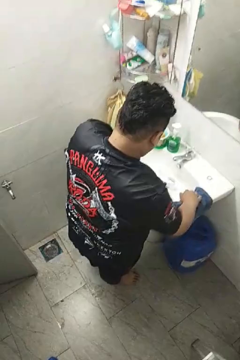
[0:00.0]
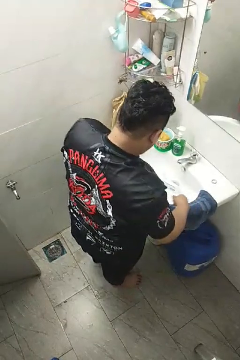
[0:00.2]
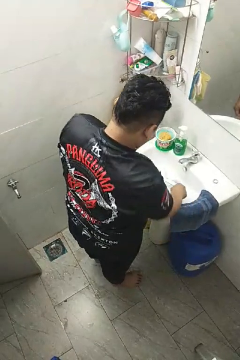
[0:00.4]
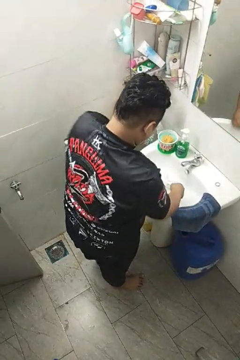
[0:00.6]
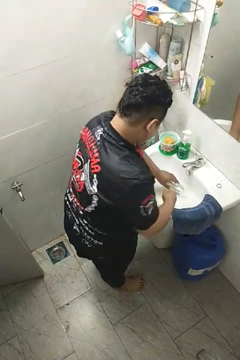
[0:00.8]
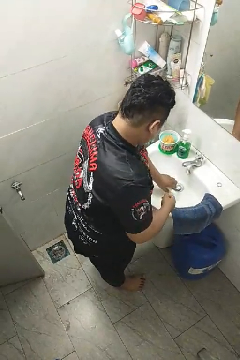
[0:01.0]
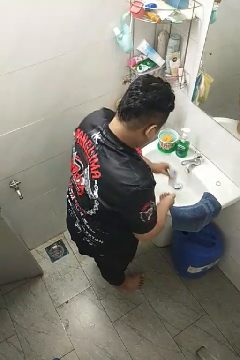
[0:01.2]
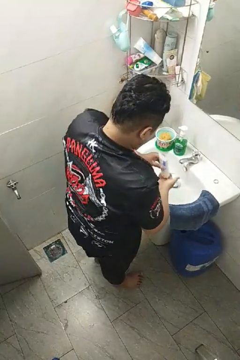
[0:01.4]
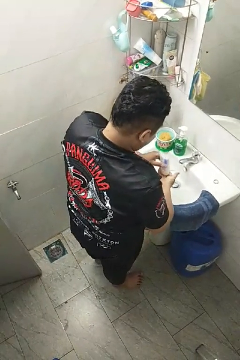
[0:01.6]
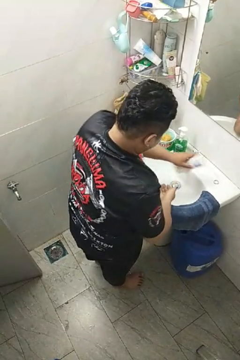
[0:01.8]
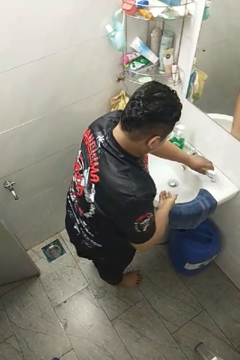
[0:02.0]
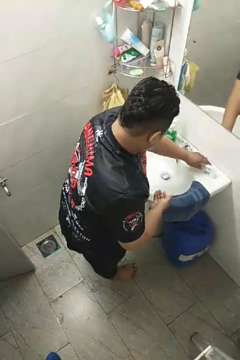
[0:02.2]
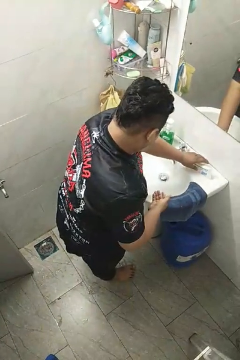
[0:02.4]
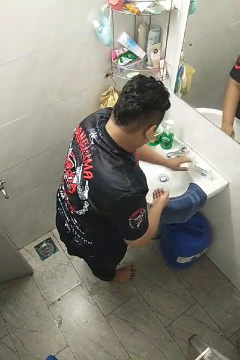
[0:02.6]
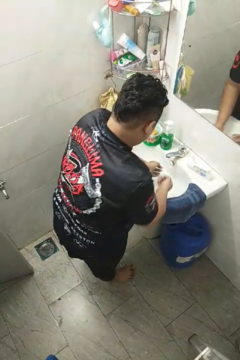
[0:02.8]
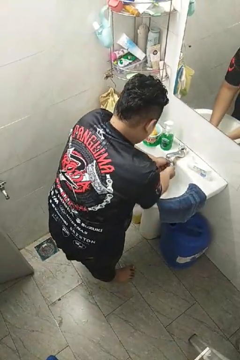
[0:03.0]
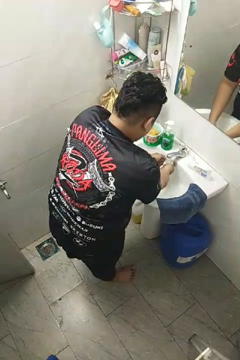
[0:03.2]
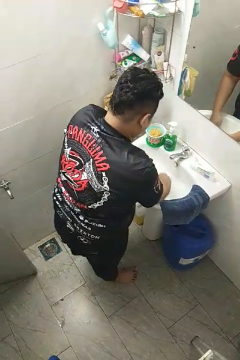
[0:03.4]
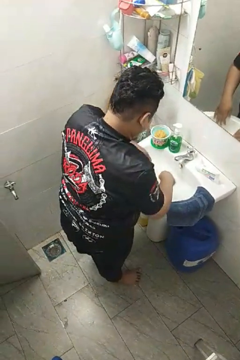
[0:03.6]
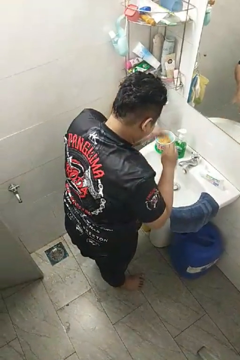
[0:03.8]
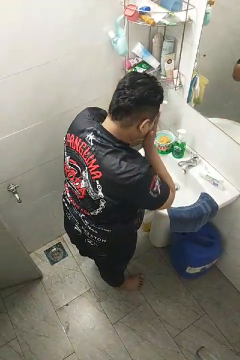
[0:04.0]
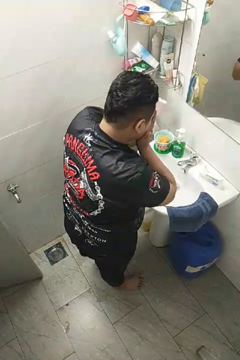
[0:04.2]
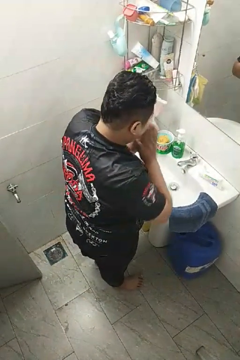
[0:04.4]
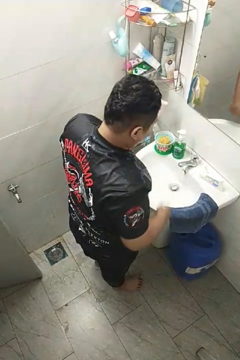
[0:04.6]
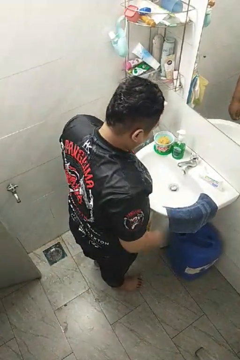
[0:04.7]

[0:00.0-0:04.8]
person washes face

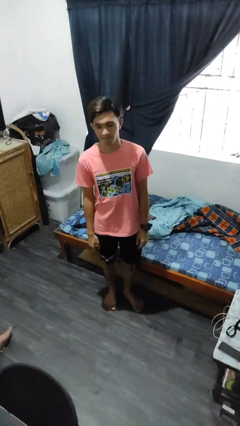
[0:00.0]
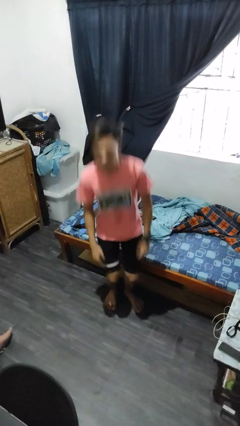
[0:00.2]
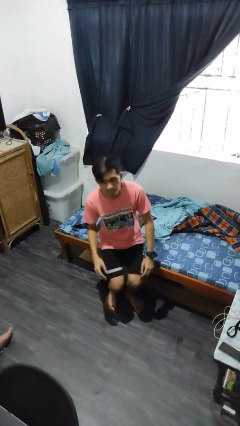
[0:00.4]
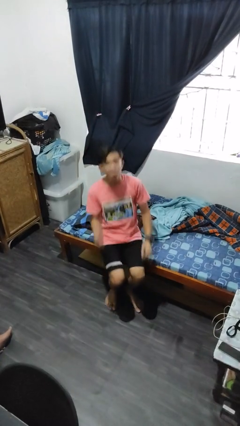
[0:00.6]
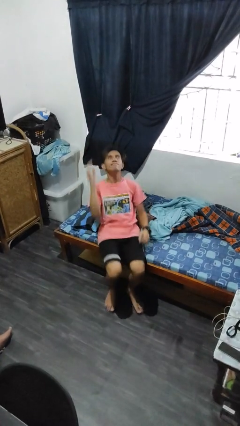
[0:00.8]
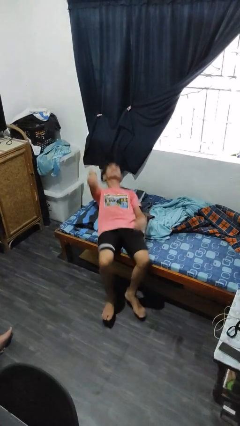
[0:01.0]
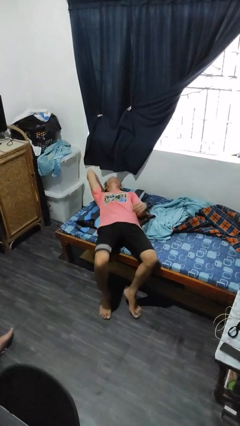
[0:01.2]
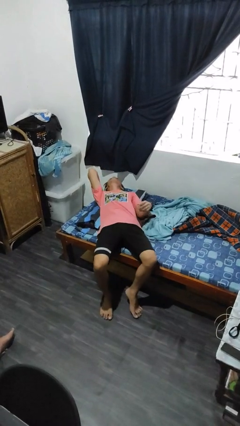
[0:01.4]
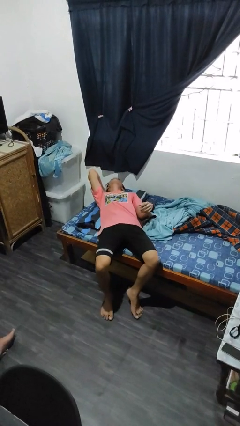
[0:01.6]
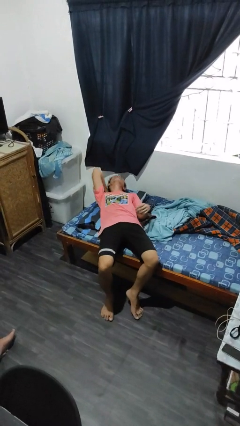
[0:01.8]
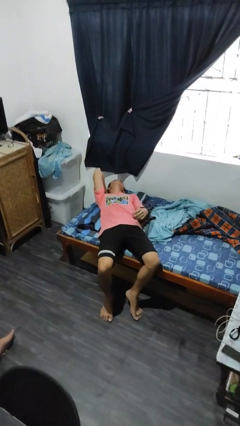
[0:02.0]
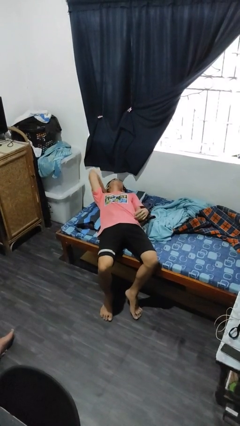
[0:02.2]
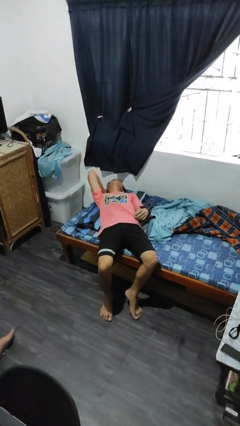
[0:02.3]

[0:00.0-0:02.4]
person lies down on bed

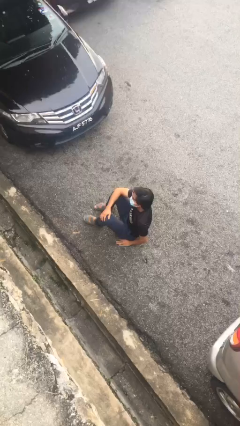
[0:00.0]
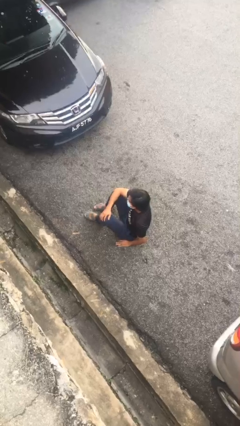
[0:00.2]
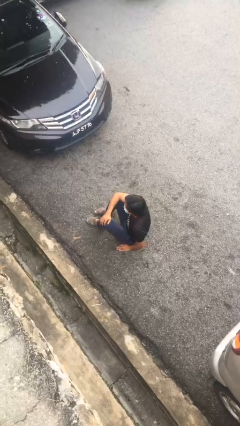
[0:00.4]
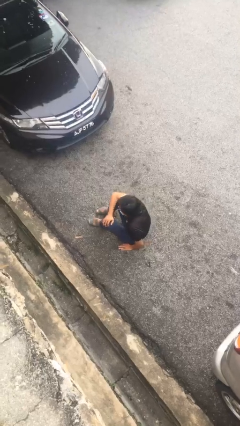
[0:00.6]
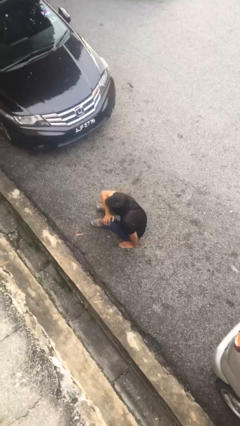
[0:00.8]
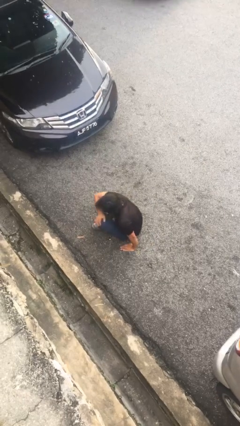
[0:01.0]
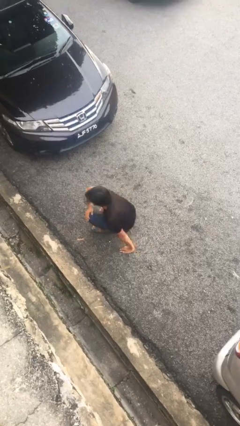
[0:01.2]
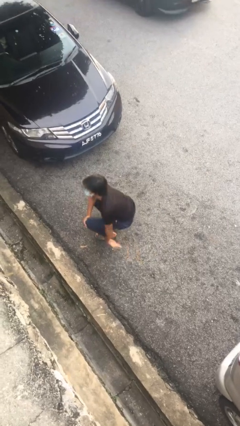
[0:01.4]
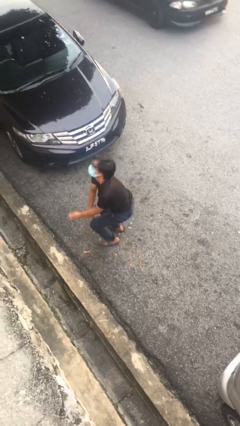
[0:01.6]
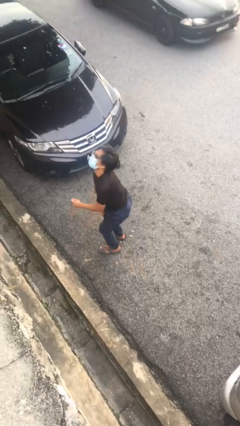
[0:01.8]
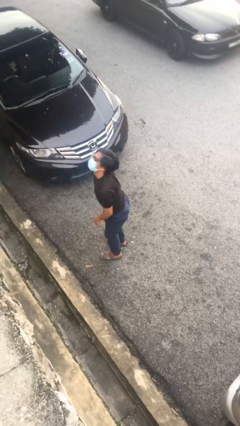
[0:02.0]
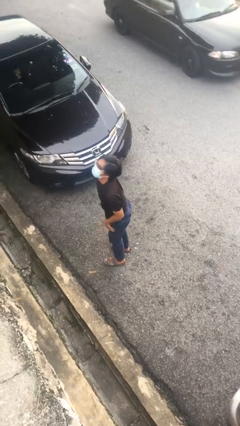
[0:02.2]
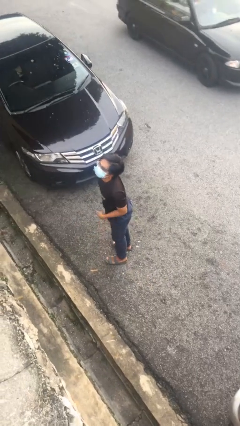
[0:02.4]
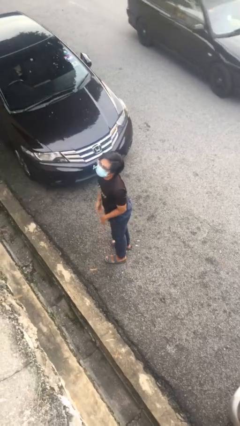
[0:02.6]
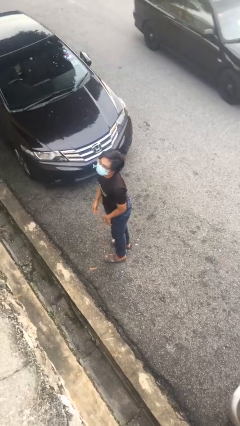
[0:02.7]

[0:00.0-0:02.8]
person stands up

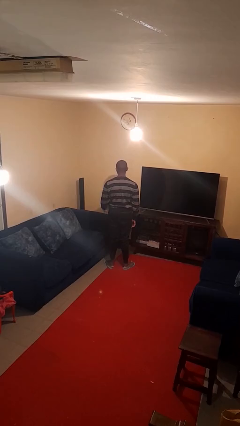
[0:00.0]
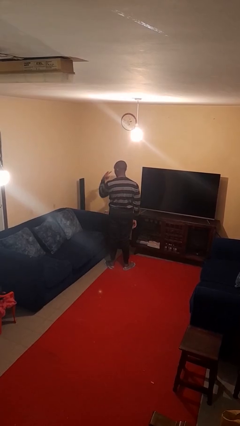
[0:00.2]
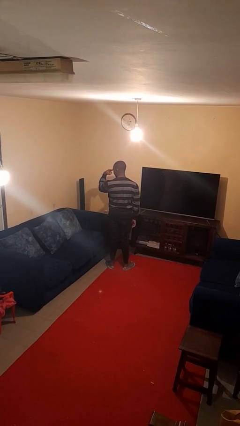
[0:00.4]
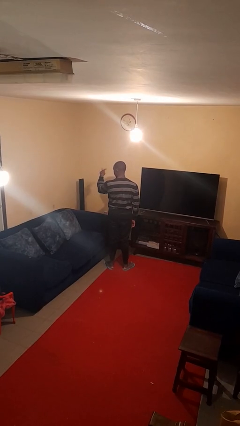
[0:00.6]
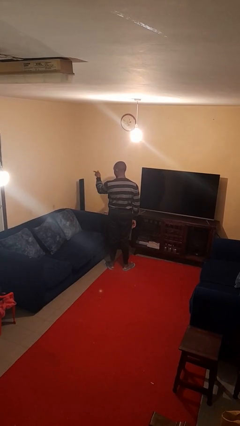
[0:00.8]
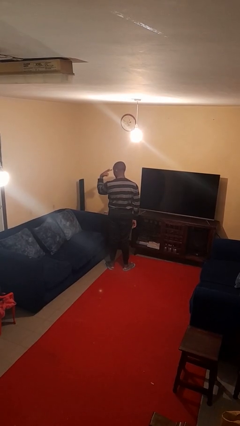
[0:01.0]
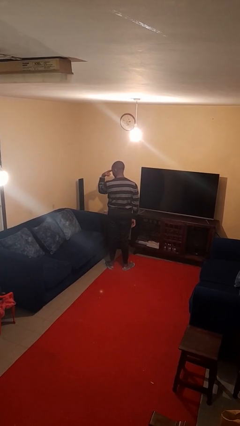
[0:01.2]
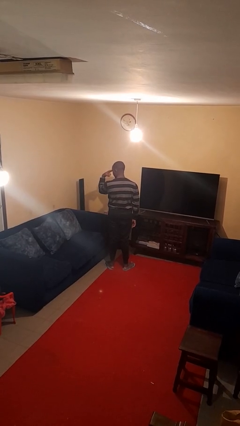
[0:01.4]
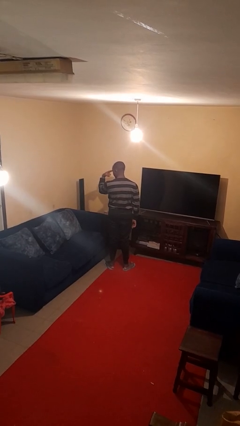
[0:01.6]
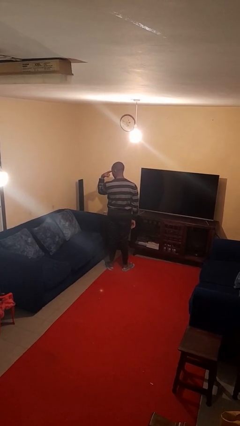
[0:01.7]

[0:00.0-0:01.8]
person gestures watch closely

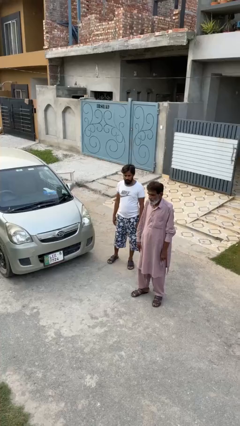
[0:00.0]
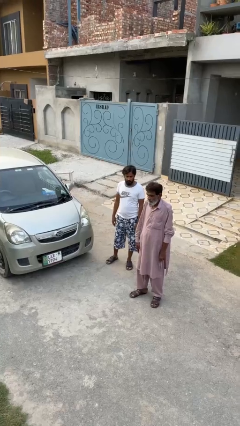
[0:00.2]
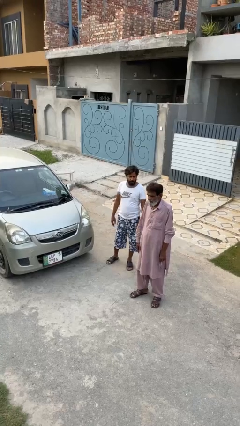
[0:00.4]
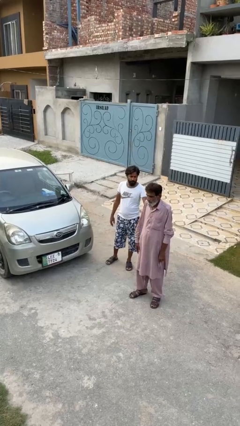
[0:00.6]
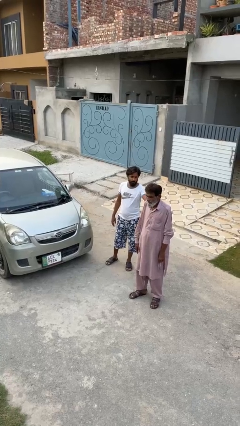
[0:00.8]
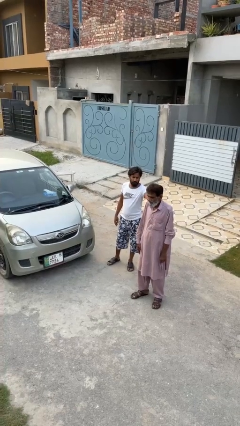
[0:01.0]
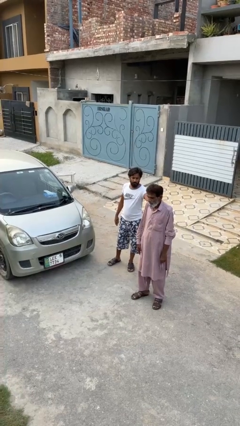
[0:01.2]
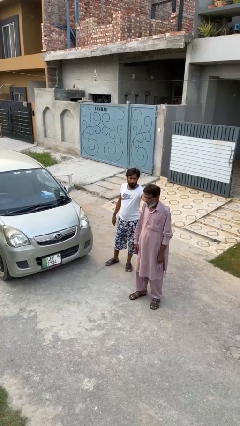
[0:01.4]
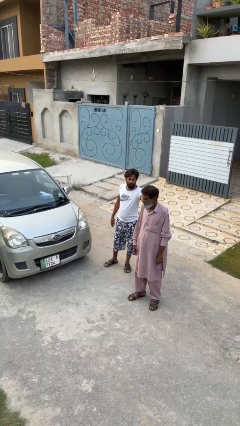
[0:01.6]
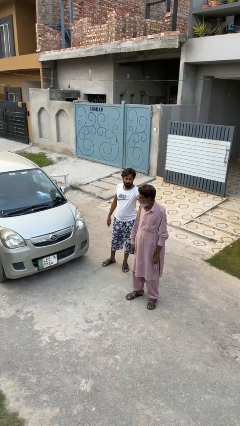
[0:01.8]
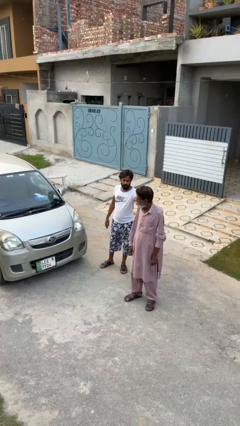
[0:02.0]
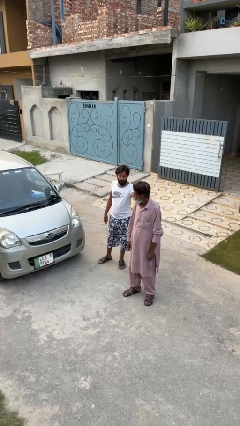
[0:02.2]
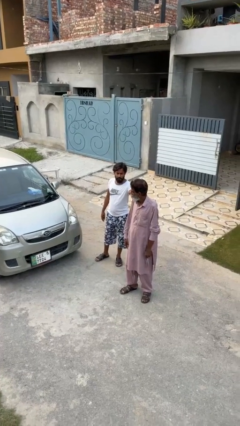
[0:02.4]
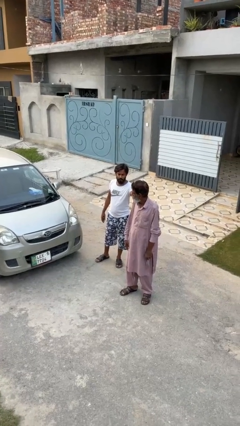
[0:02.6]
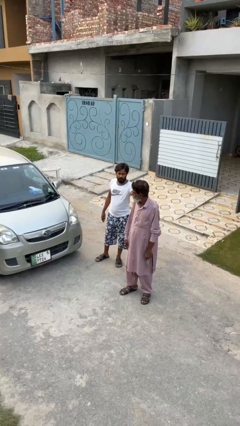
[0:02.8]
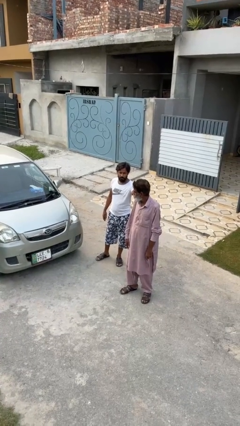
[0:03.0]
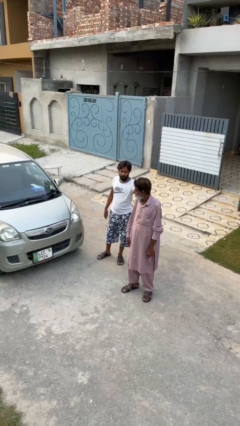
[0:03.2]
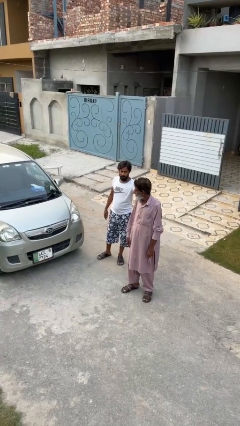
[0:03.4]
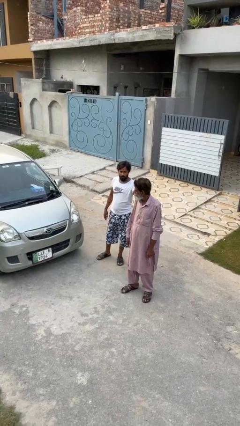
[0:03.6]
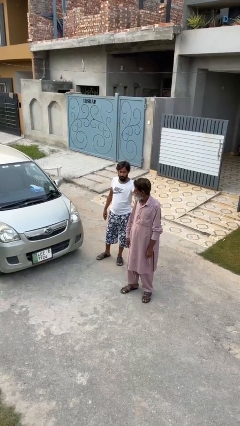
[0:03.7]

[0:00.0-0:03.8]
person touches back of person

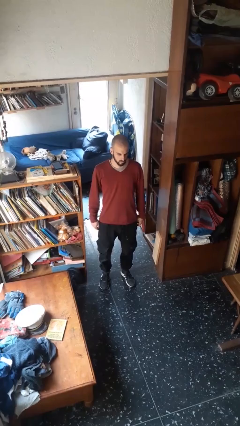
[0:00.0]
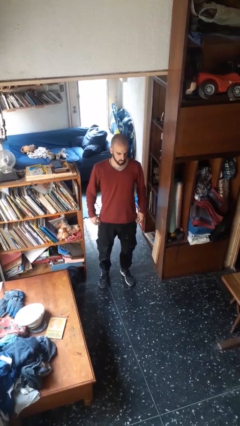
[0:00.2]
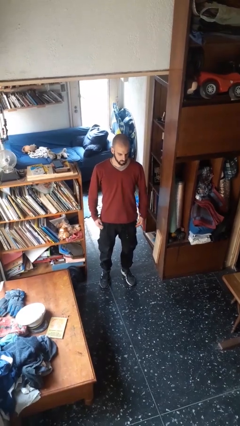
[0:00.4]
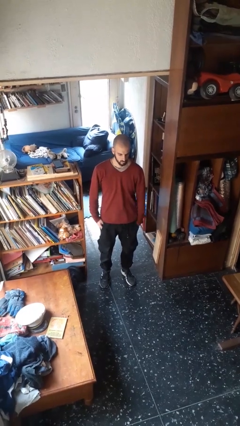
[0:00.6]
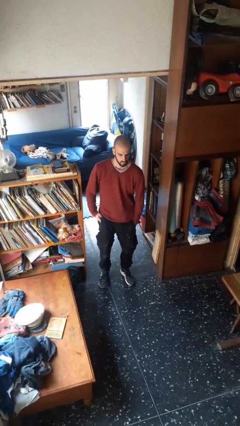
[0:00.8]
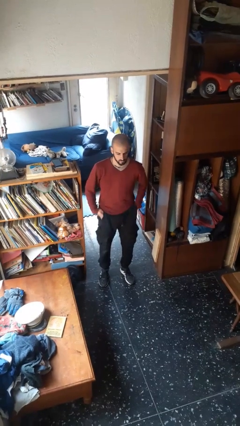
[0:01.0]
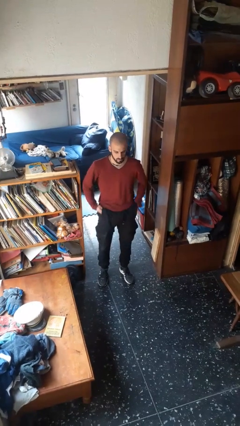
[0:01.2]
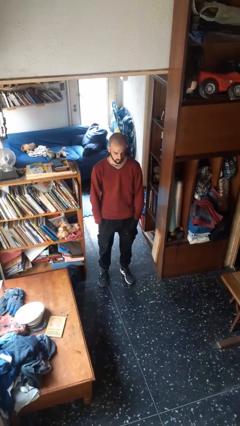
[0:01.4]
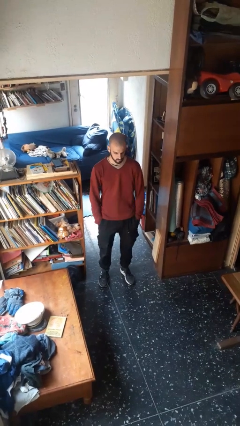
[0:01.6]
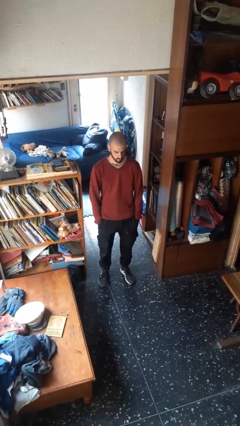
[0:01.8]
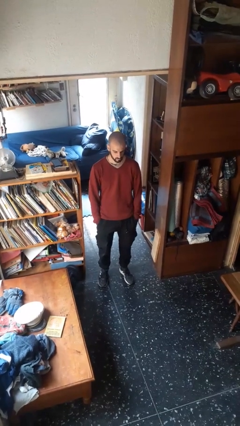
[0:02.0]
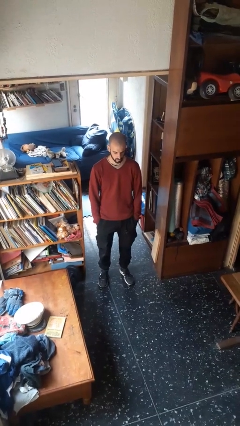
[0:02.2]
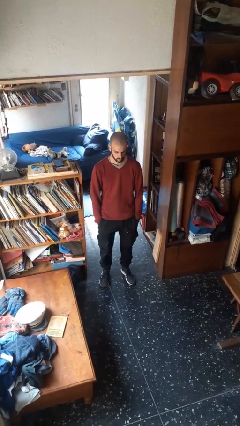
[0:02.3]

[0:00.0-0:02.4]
person puts hands in back pockets

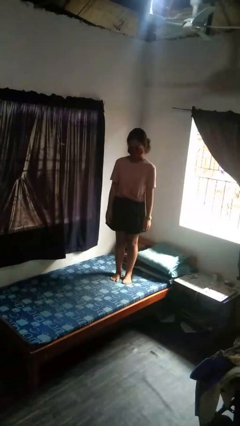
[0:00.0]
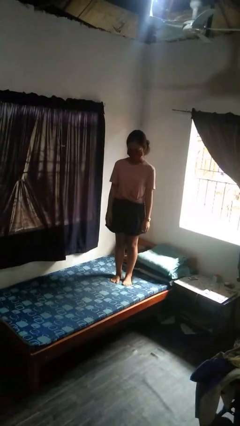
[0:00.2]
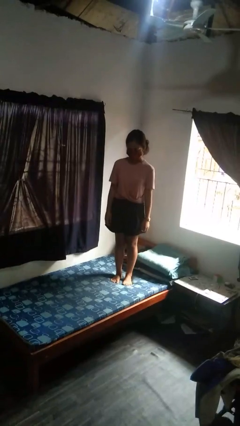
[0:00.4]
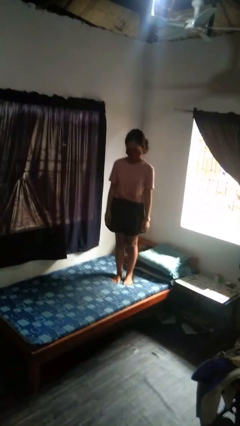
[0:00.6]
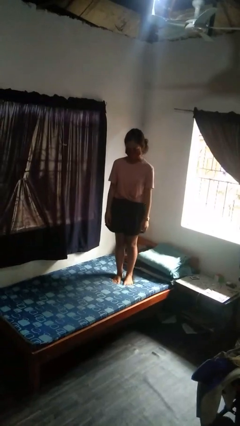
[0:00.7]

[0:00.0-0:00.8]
person jumps on bed
